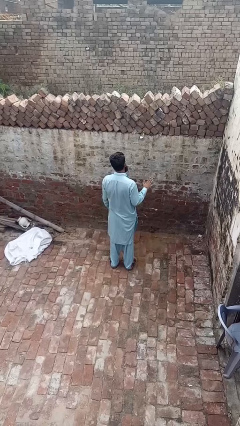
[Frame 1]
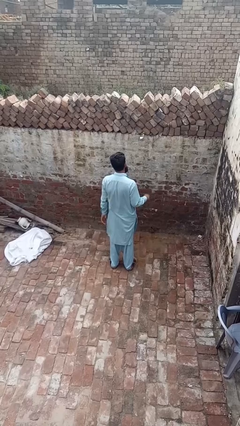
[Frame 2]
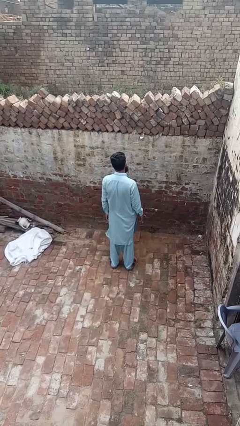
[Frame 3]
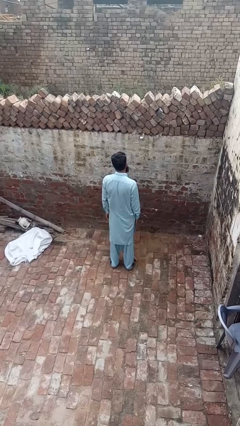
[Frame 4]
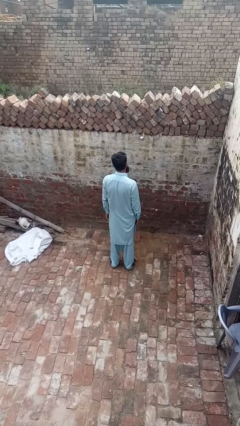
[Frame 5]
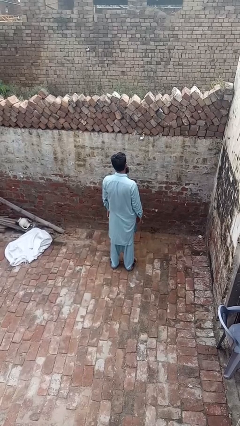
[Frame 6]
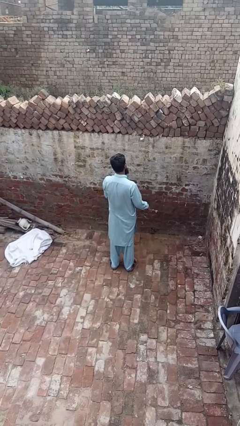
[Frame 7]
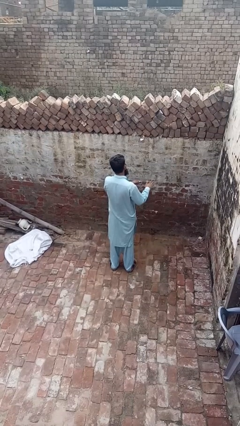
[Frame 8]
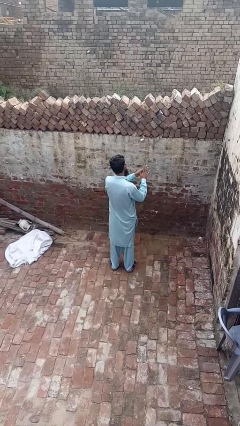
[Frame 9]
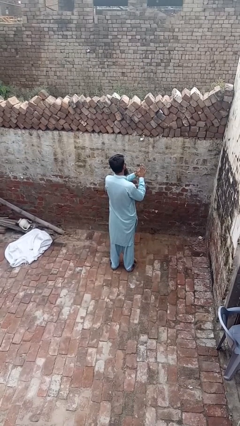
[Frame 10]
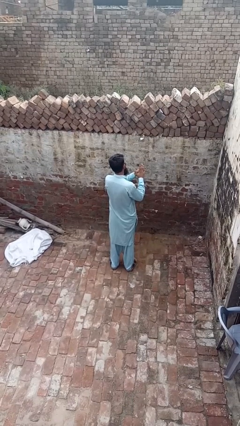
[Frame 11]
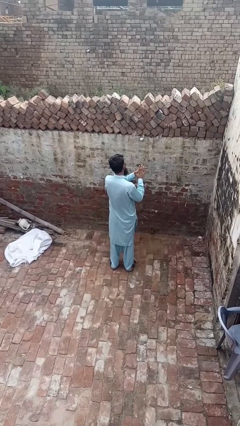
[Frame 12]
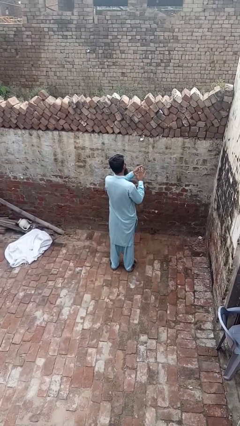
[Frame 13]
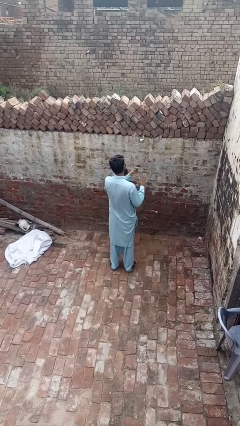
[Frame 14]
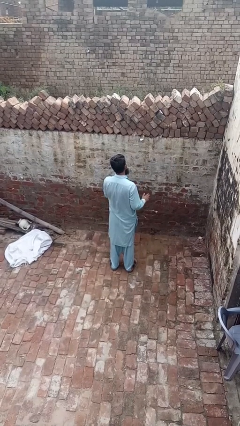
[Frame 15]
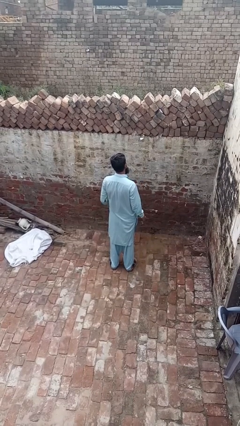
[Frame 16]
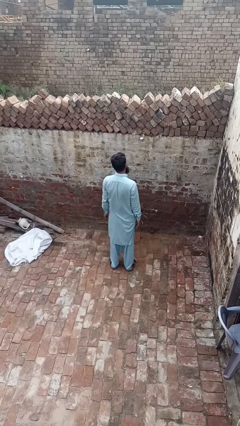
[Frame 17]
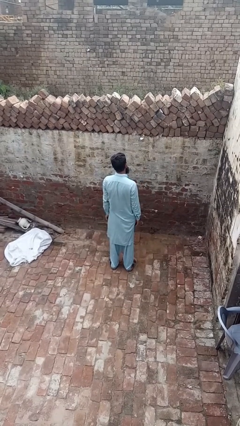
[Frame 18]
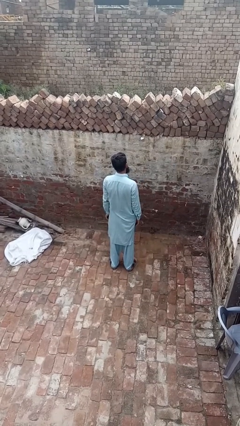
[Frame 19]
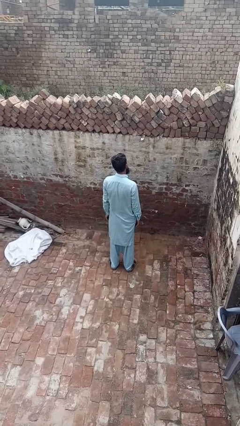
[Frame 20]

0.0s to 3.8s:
person takes off ring

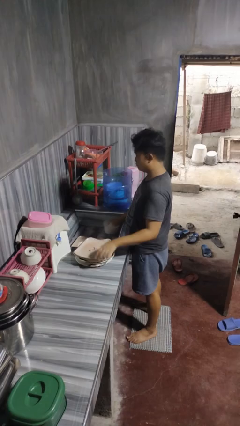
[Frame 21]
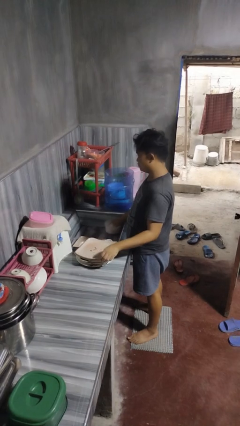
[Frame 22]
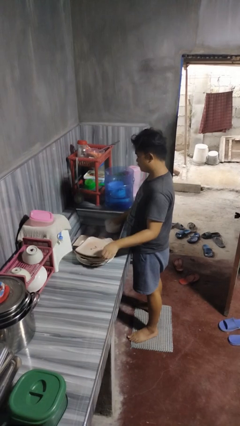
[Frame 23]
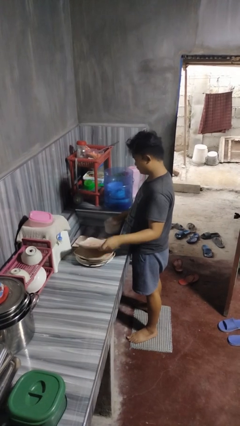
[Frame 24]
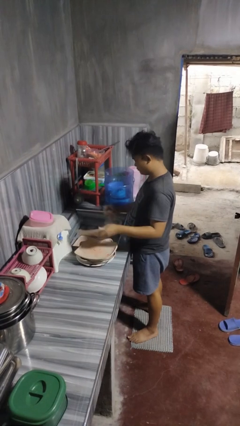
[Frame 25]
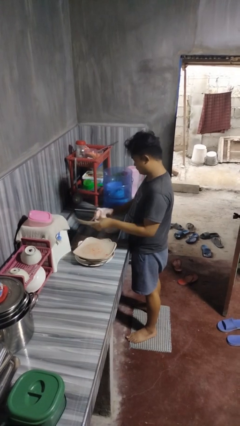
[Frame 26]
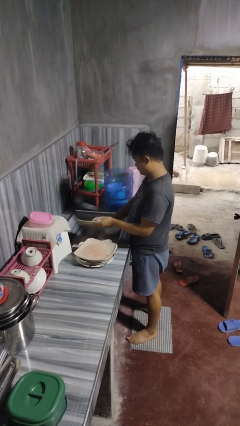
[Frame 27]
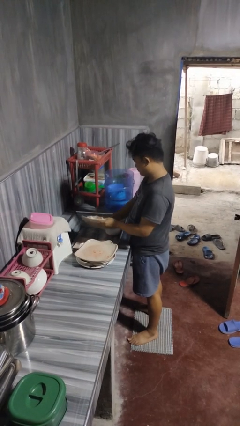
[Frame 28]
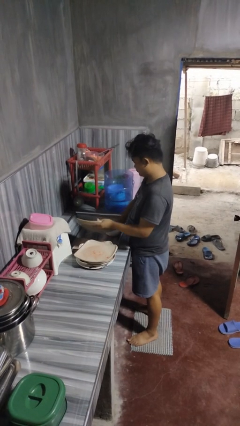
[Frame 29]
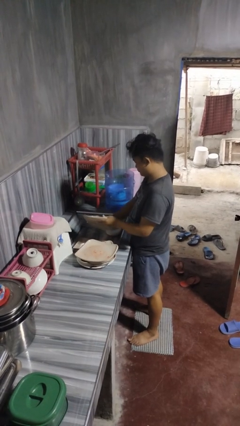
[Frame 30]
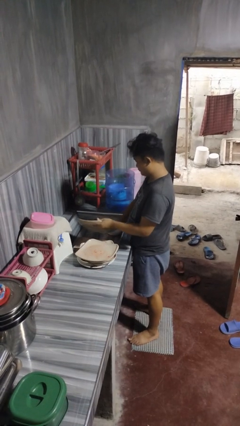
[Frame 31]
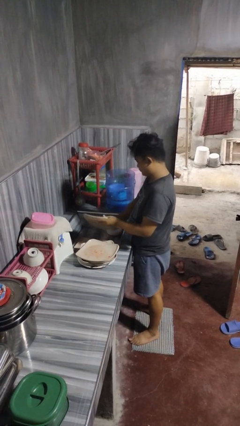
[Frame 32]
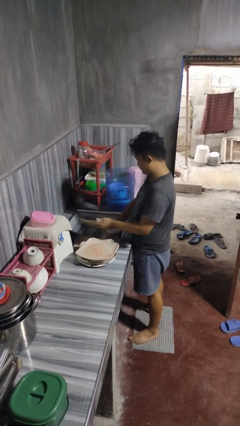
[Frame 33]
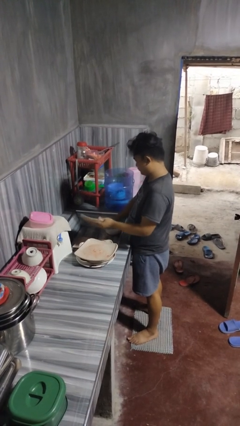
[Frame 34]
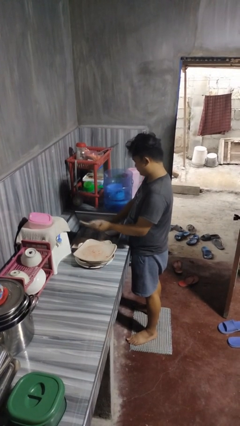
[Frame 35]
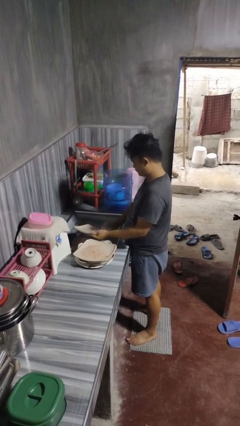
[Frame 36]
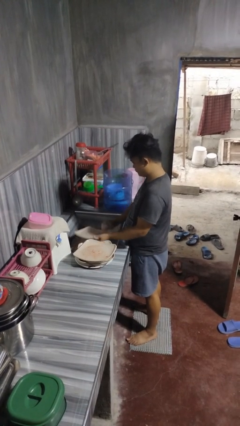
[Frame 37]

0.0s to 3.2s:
person washes dish

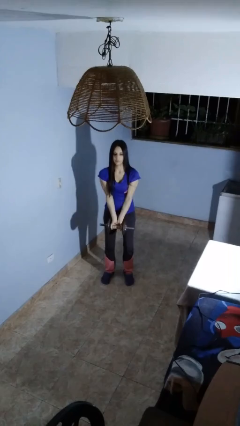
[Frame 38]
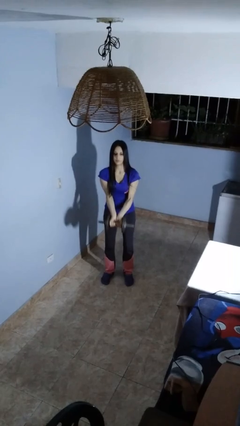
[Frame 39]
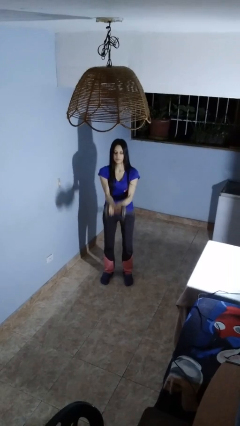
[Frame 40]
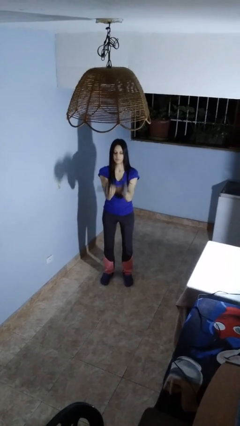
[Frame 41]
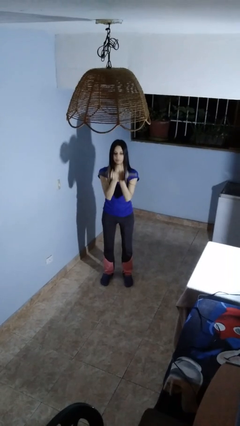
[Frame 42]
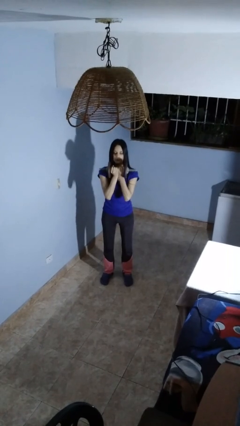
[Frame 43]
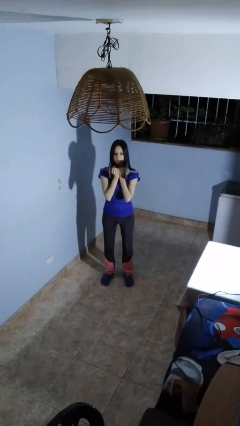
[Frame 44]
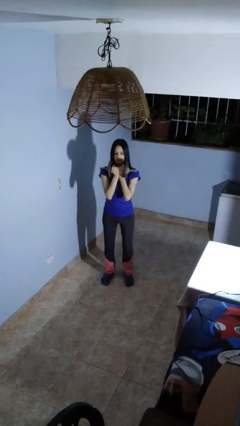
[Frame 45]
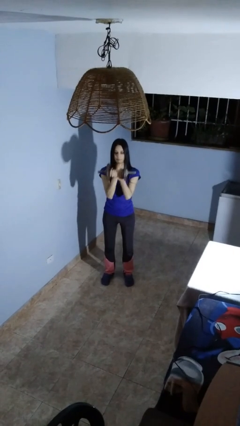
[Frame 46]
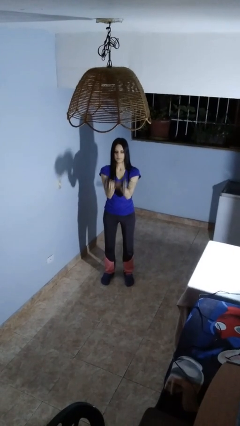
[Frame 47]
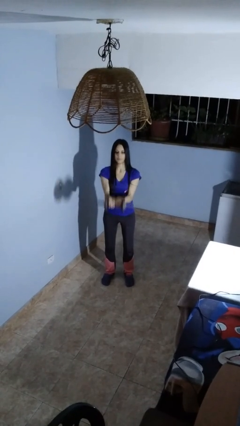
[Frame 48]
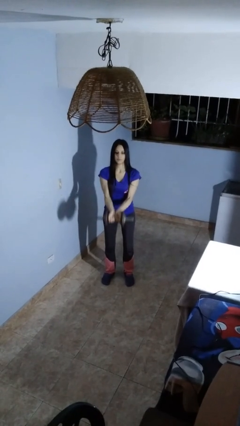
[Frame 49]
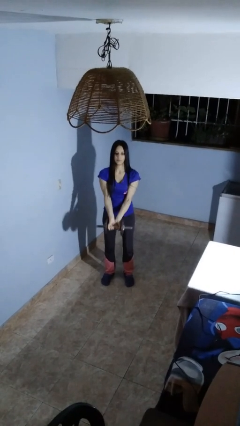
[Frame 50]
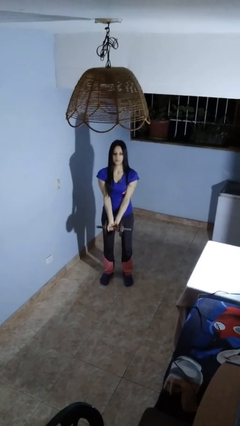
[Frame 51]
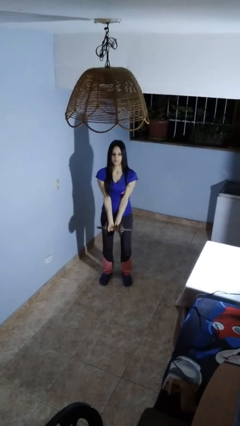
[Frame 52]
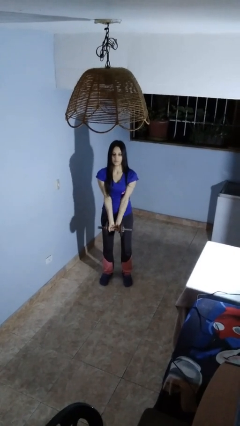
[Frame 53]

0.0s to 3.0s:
person lifts dumbbells

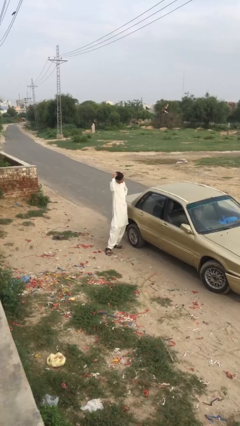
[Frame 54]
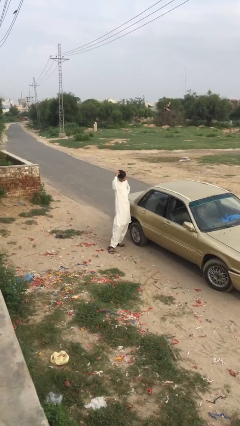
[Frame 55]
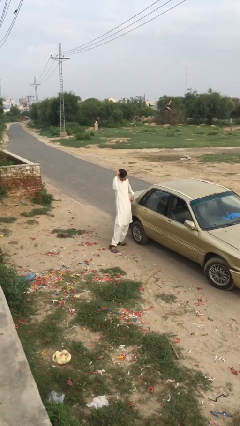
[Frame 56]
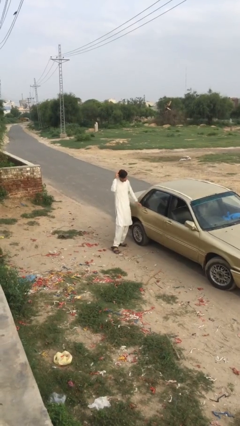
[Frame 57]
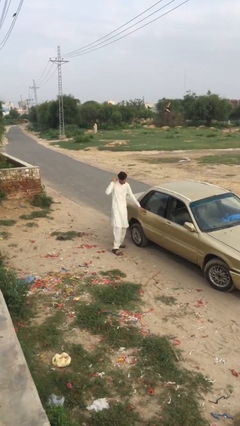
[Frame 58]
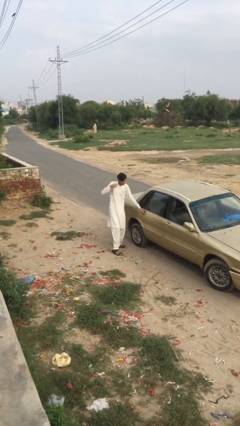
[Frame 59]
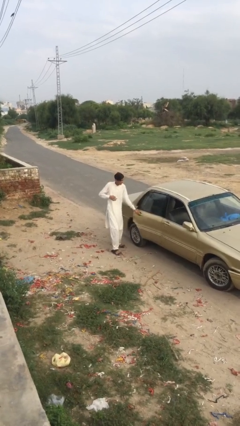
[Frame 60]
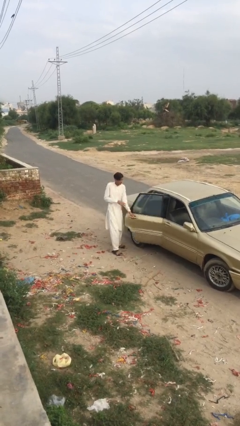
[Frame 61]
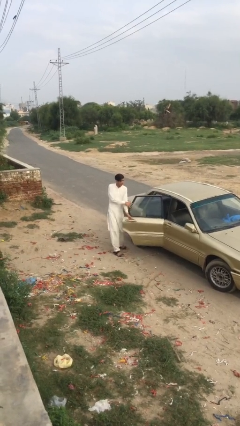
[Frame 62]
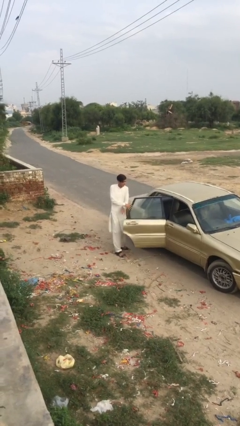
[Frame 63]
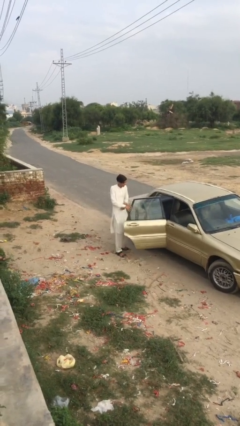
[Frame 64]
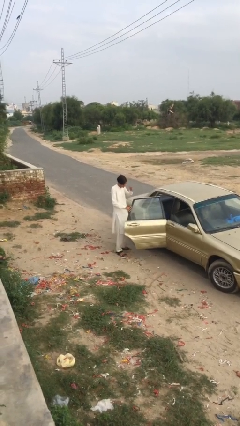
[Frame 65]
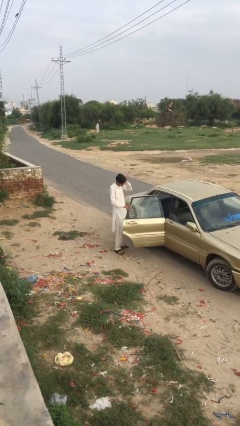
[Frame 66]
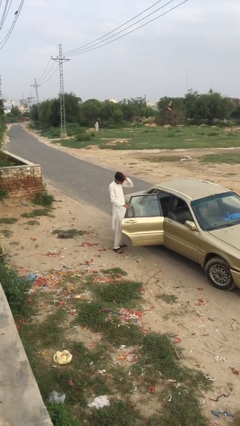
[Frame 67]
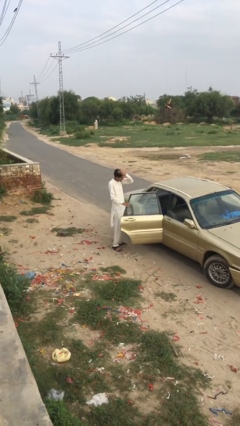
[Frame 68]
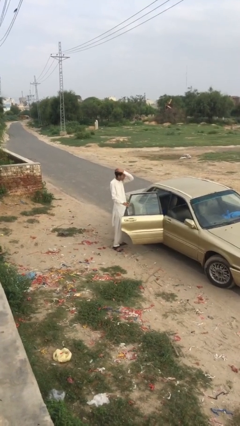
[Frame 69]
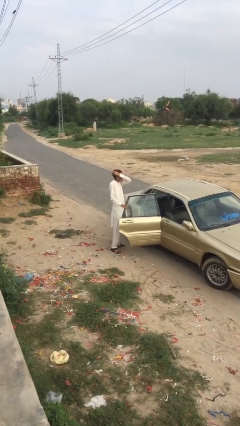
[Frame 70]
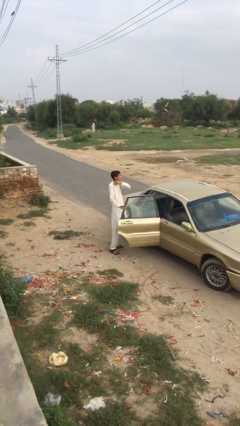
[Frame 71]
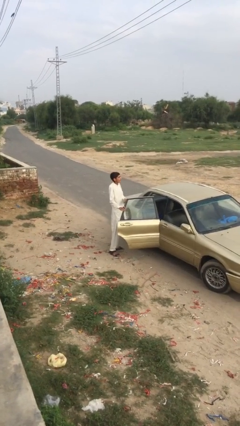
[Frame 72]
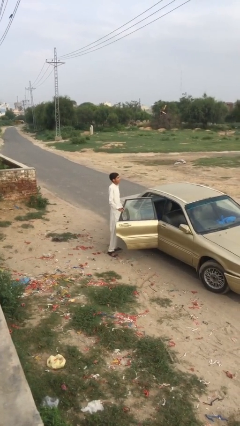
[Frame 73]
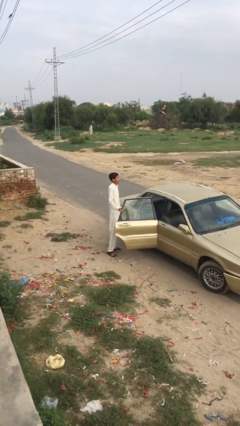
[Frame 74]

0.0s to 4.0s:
person opens car door

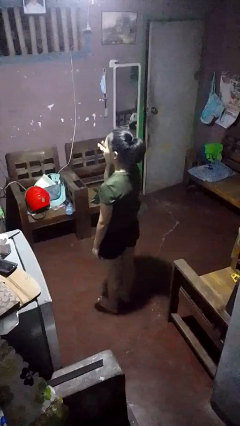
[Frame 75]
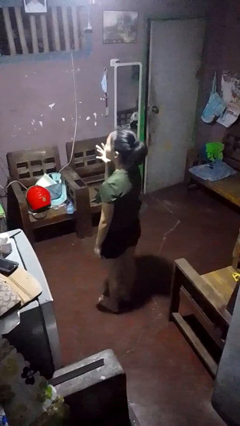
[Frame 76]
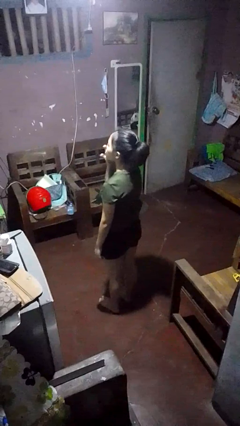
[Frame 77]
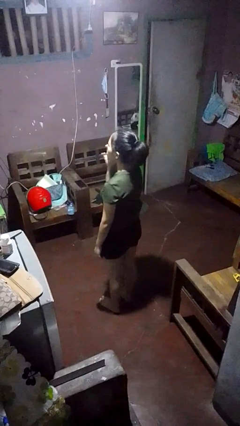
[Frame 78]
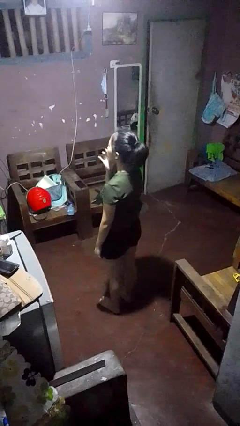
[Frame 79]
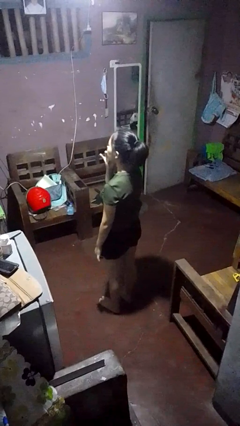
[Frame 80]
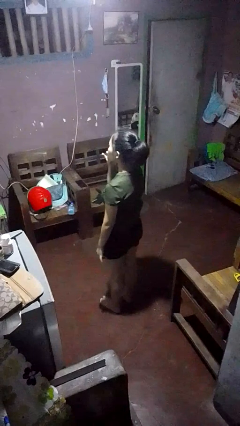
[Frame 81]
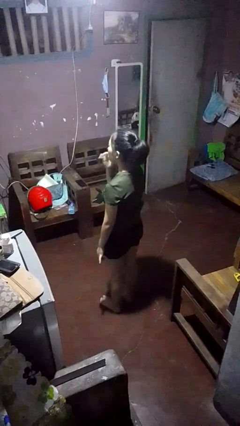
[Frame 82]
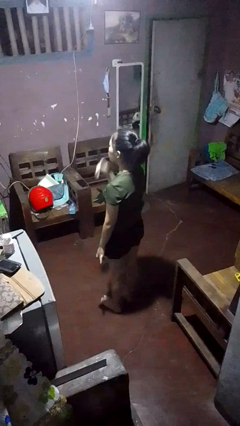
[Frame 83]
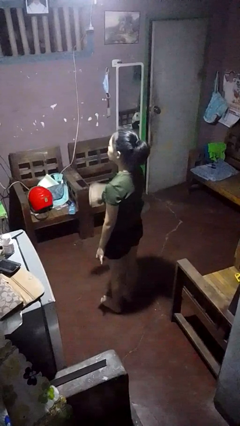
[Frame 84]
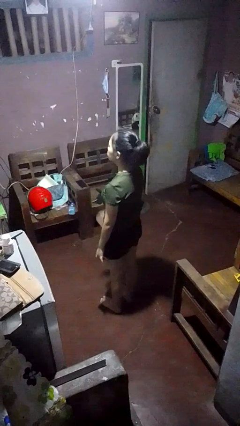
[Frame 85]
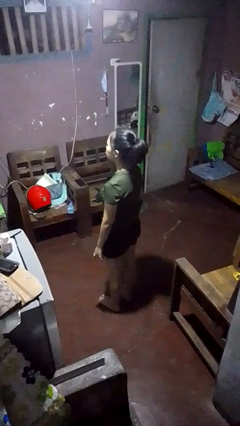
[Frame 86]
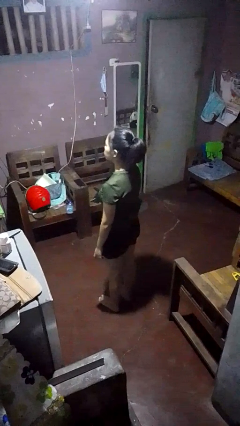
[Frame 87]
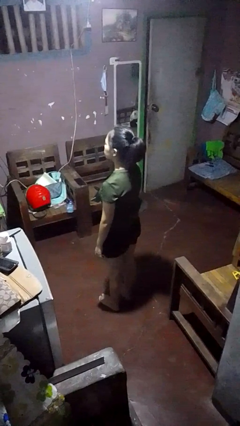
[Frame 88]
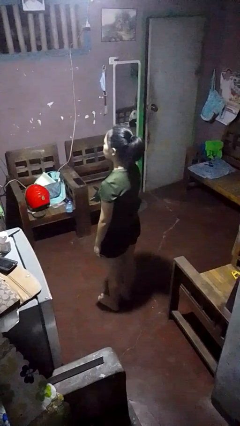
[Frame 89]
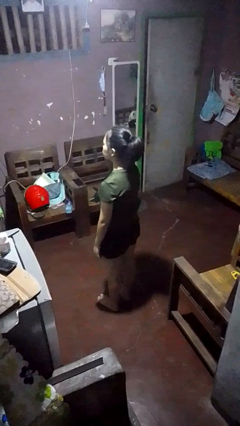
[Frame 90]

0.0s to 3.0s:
person licks fingers

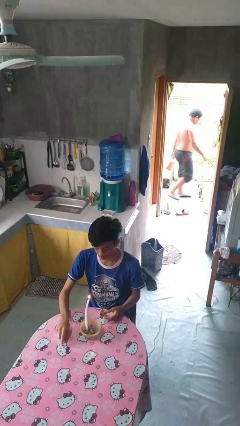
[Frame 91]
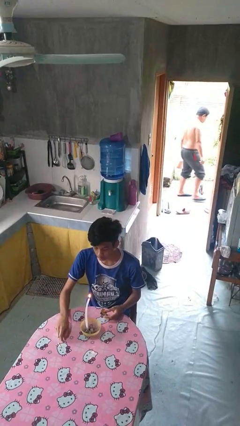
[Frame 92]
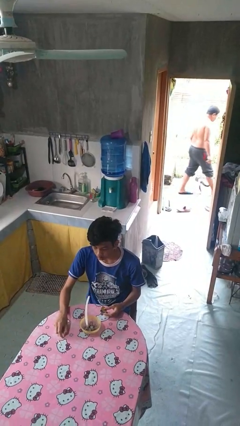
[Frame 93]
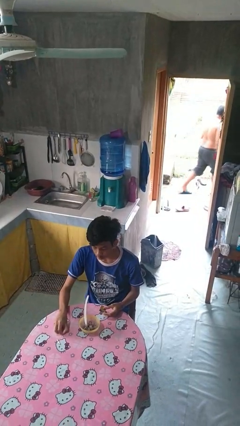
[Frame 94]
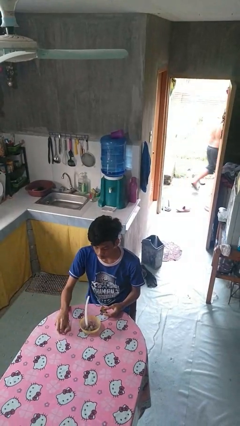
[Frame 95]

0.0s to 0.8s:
person extinguishes candle
